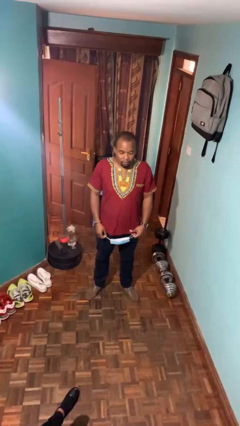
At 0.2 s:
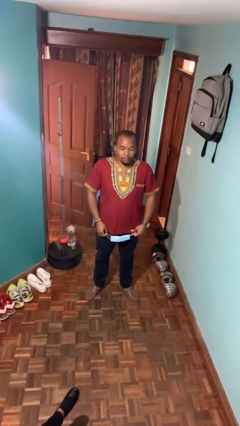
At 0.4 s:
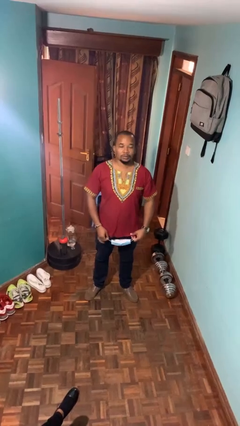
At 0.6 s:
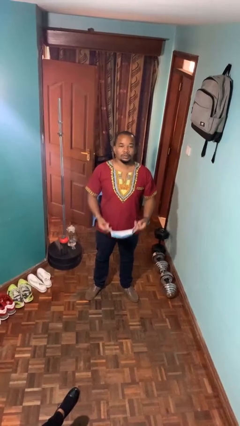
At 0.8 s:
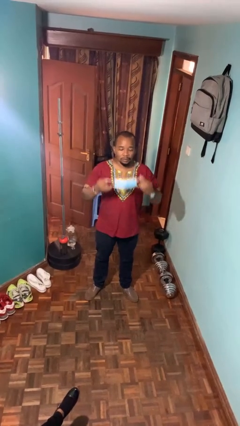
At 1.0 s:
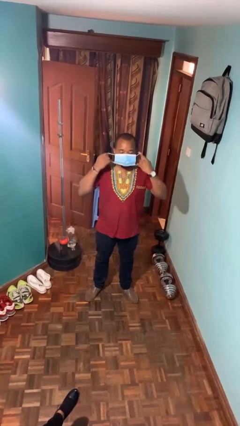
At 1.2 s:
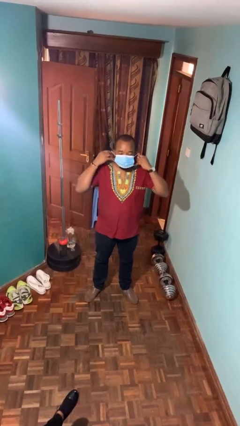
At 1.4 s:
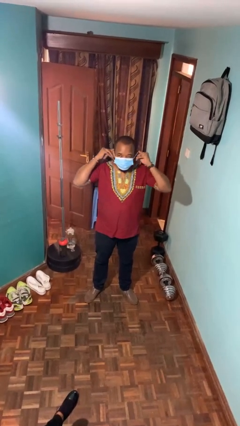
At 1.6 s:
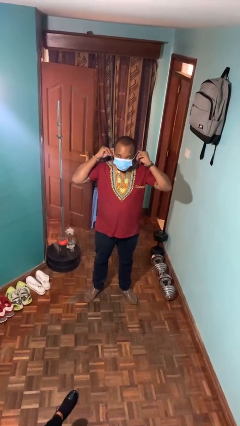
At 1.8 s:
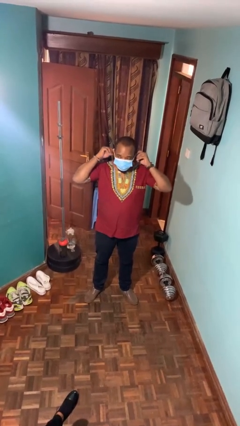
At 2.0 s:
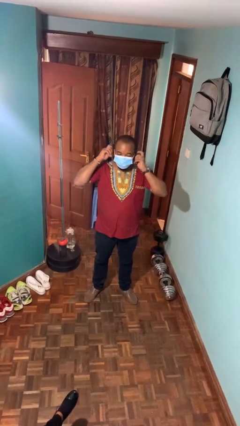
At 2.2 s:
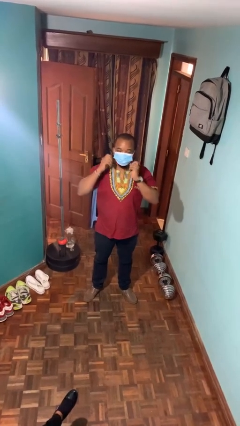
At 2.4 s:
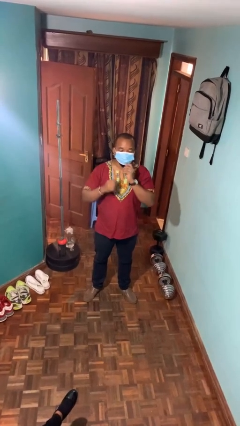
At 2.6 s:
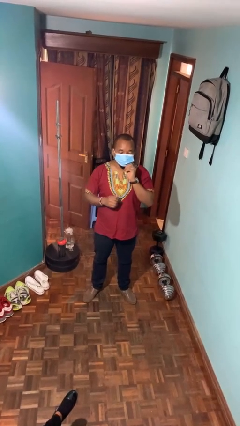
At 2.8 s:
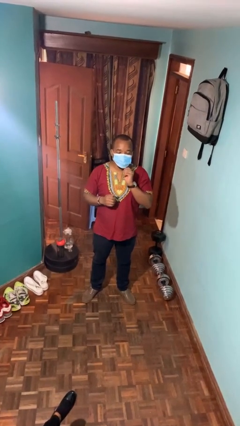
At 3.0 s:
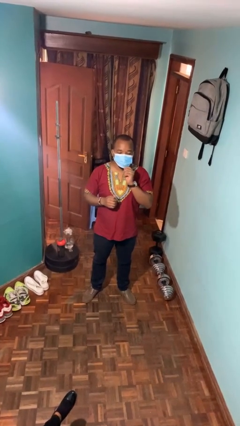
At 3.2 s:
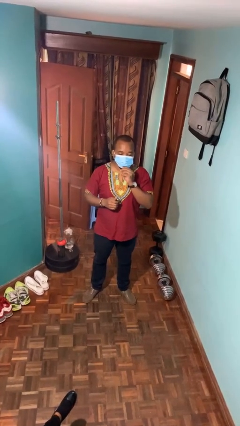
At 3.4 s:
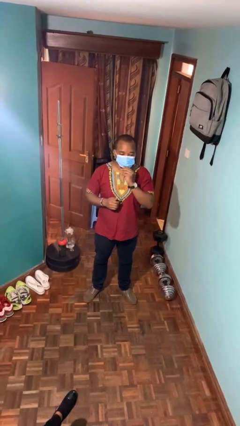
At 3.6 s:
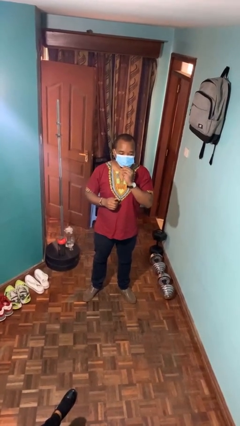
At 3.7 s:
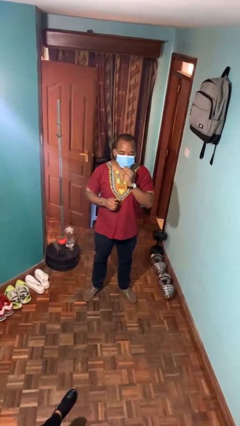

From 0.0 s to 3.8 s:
person puts on facemask

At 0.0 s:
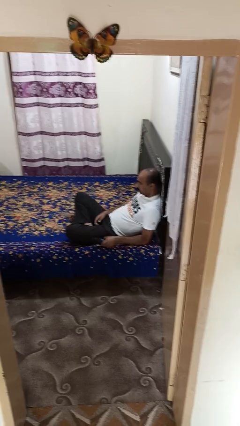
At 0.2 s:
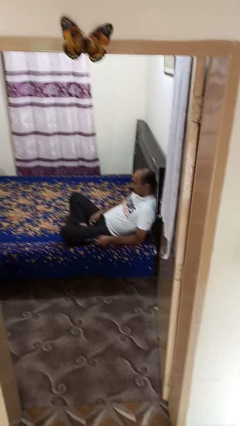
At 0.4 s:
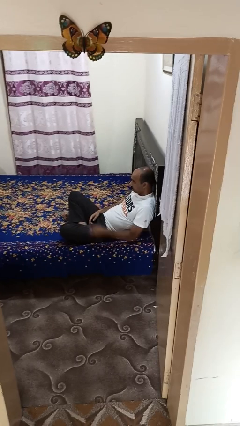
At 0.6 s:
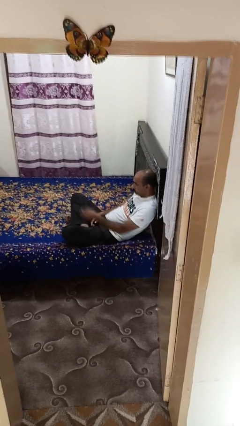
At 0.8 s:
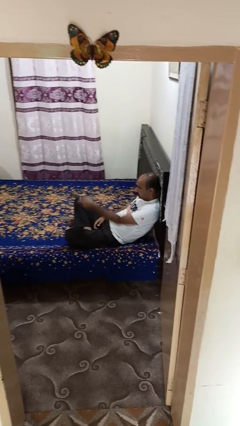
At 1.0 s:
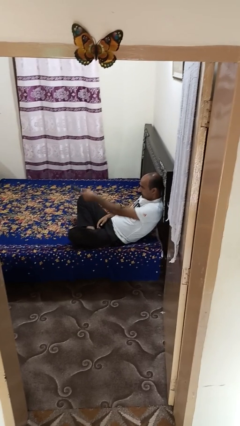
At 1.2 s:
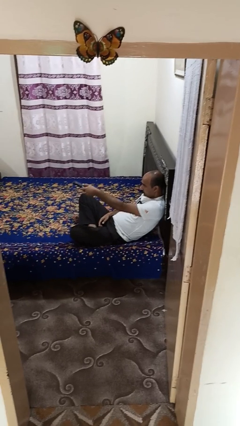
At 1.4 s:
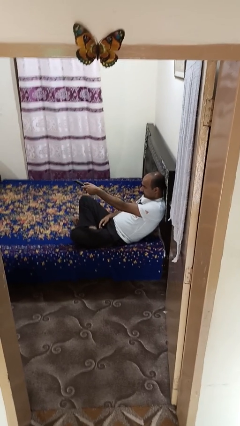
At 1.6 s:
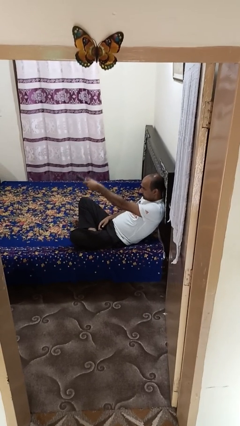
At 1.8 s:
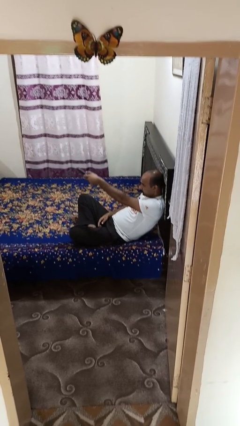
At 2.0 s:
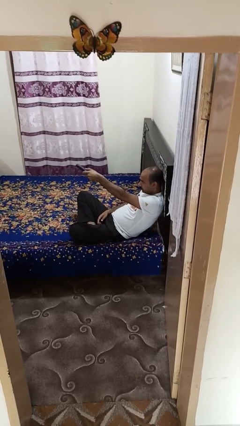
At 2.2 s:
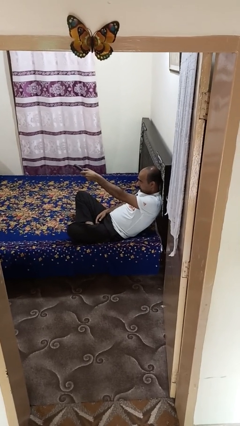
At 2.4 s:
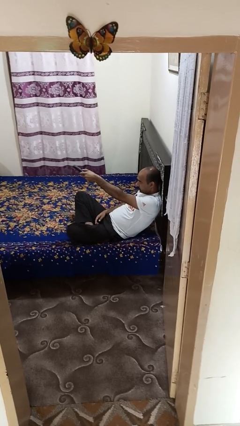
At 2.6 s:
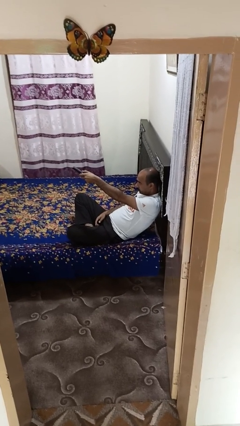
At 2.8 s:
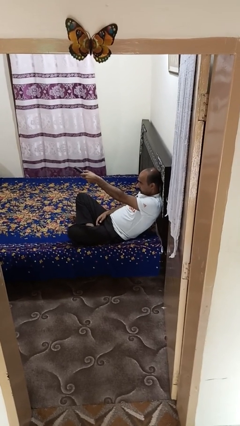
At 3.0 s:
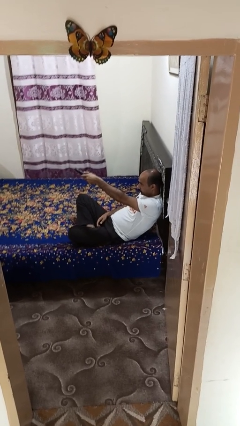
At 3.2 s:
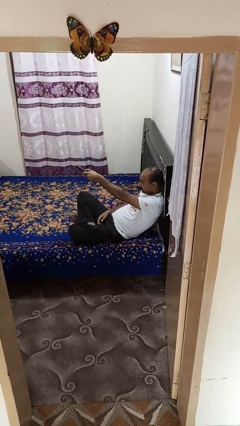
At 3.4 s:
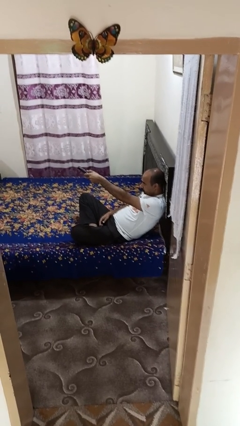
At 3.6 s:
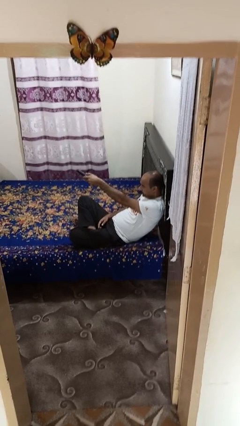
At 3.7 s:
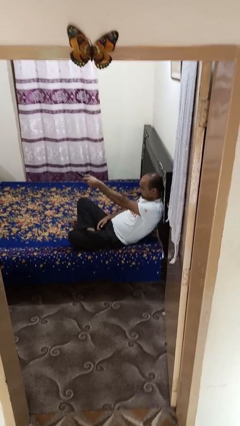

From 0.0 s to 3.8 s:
person uses television remote

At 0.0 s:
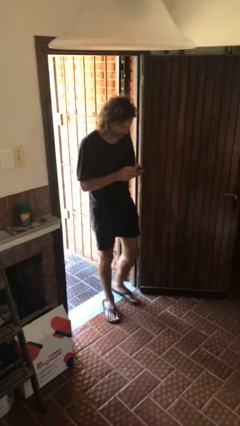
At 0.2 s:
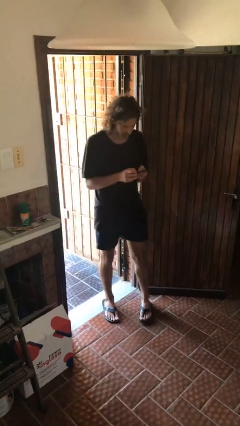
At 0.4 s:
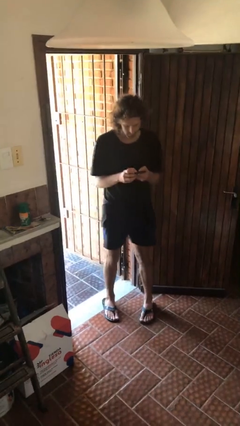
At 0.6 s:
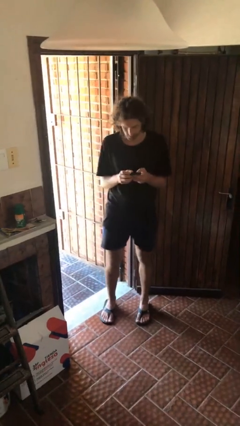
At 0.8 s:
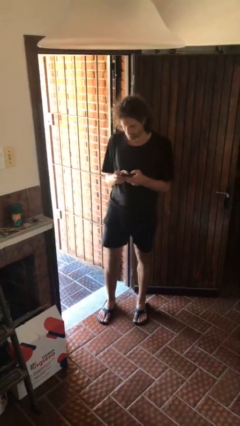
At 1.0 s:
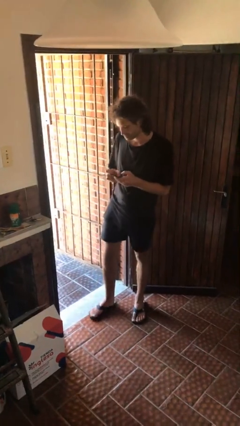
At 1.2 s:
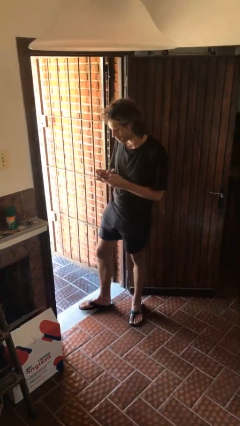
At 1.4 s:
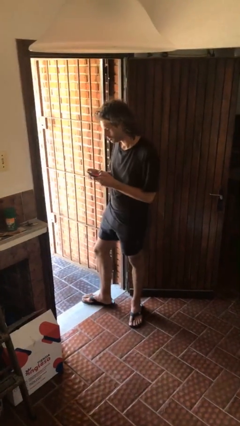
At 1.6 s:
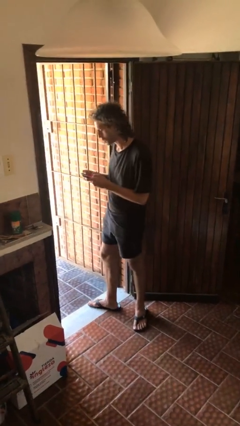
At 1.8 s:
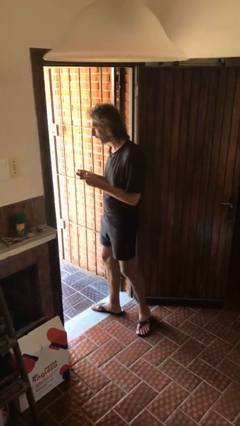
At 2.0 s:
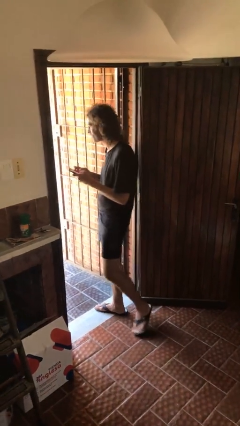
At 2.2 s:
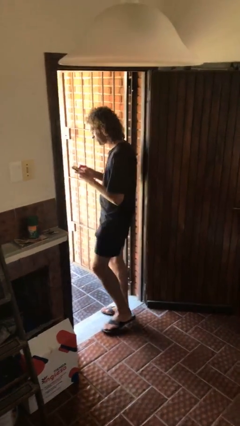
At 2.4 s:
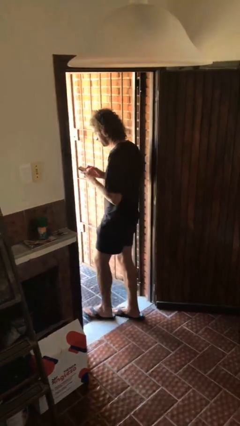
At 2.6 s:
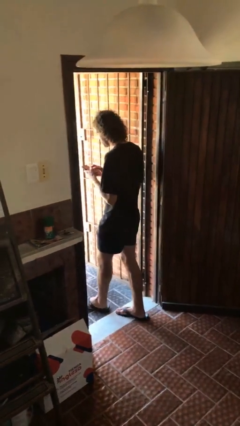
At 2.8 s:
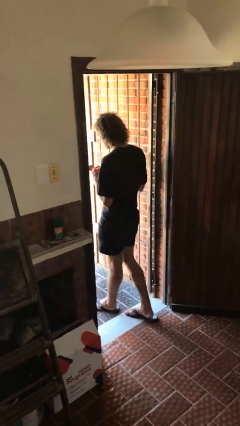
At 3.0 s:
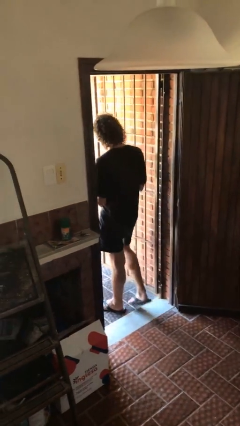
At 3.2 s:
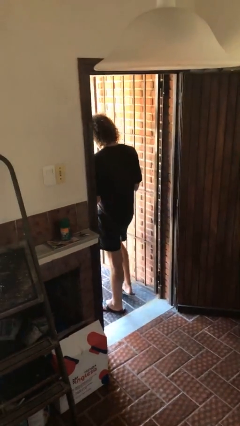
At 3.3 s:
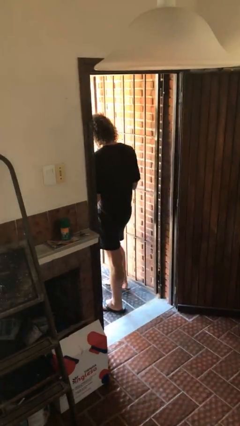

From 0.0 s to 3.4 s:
person exits scene through structure

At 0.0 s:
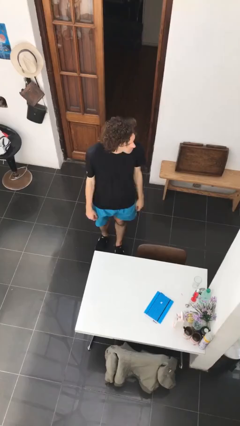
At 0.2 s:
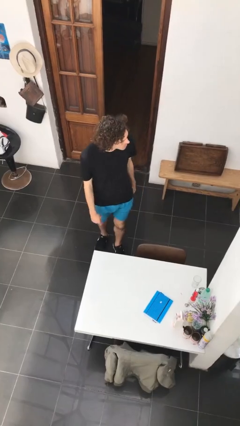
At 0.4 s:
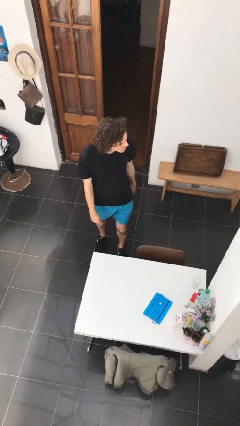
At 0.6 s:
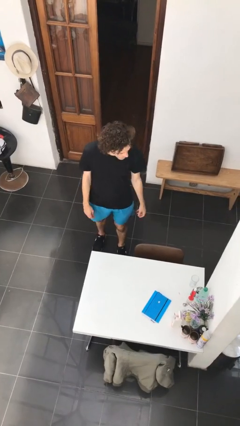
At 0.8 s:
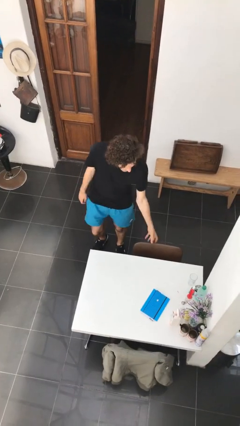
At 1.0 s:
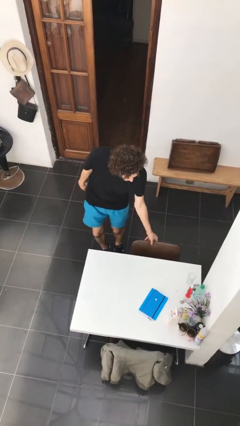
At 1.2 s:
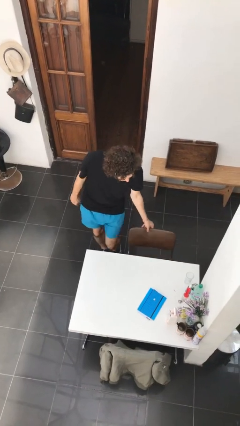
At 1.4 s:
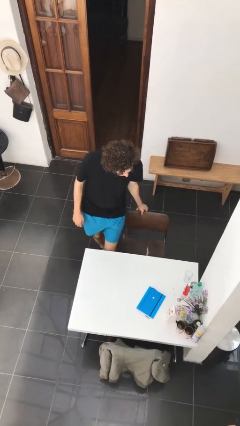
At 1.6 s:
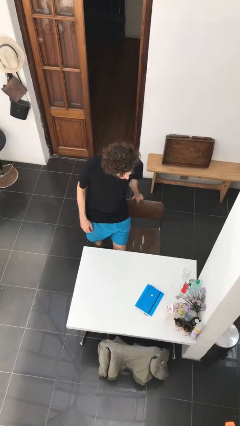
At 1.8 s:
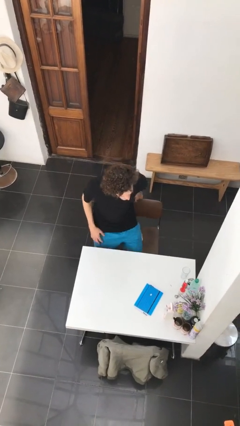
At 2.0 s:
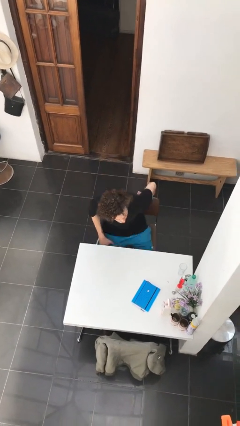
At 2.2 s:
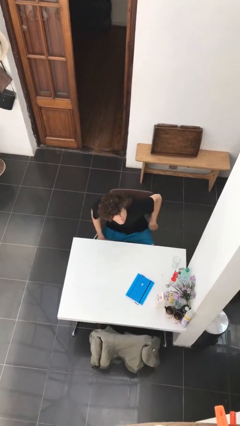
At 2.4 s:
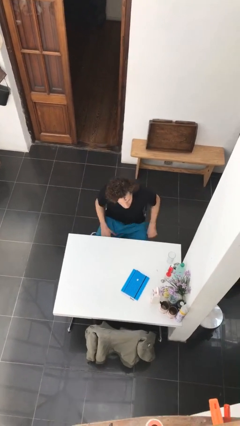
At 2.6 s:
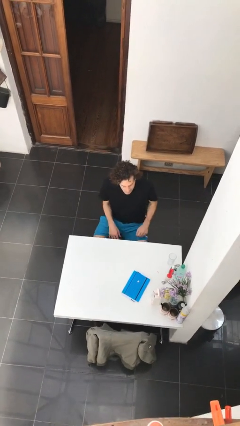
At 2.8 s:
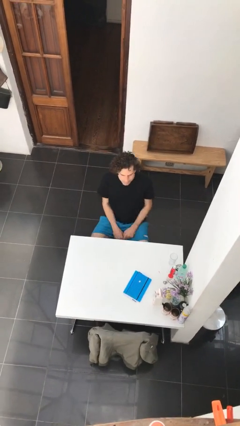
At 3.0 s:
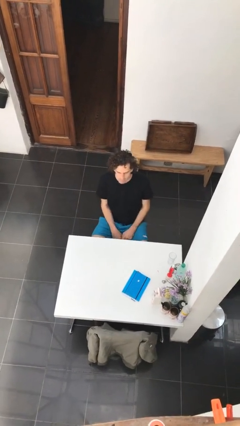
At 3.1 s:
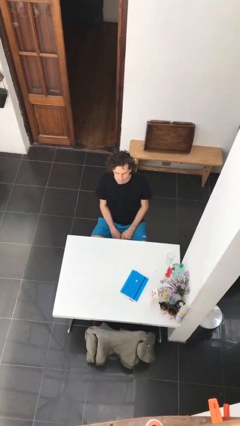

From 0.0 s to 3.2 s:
person sits down

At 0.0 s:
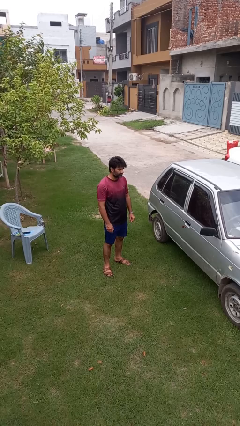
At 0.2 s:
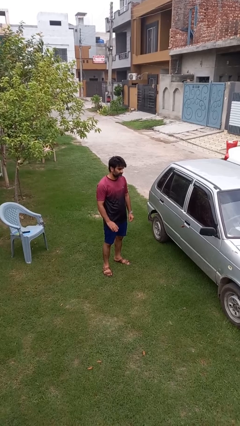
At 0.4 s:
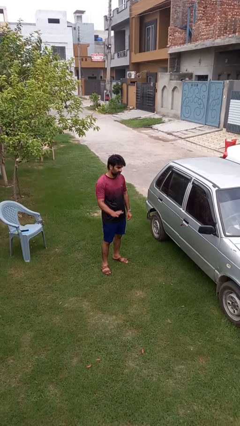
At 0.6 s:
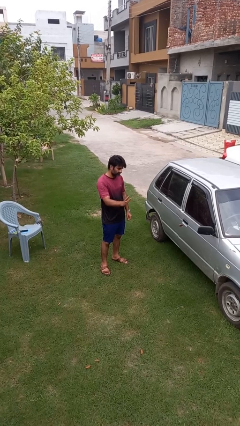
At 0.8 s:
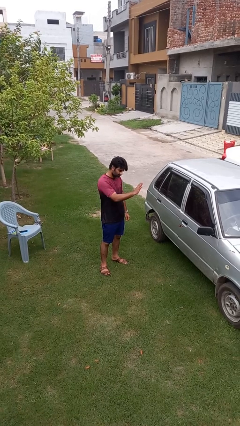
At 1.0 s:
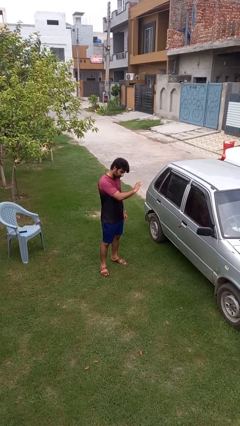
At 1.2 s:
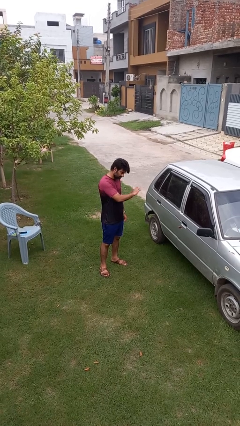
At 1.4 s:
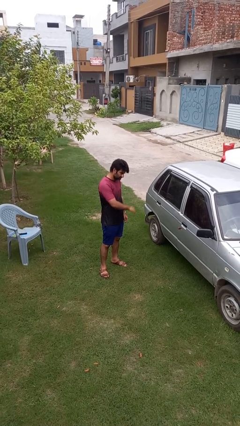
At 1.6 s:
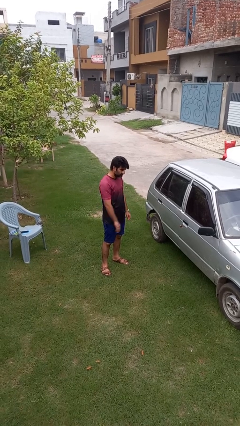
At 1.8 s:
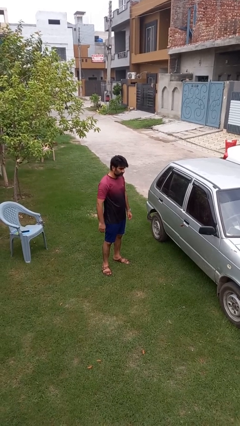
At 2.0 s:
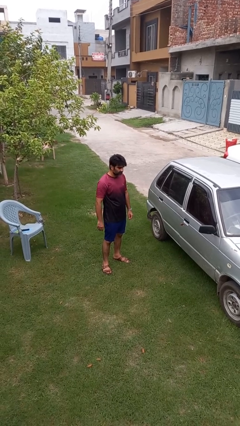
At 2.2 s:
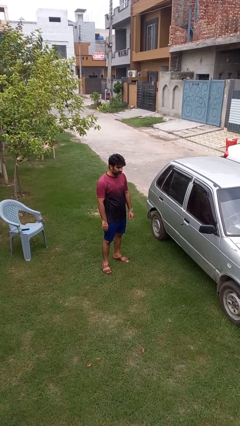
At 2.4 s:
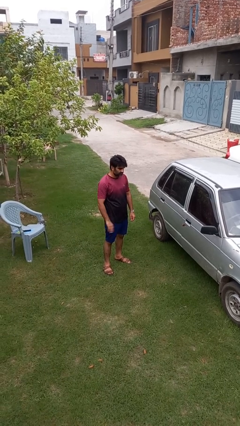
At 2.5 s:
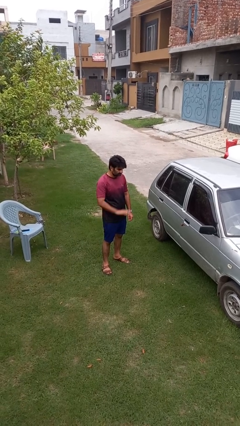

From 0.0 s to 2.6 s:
person gestures swipe left

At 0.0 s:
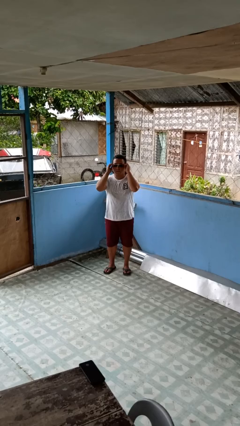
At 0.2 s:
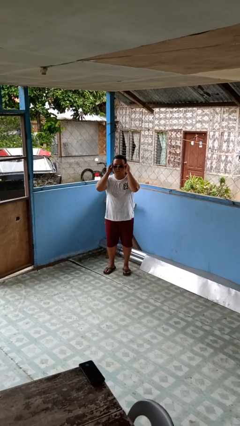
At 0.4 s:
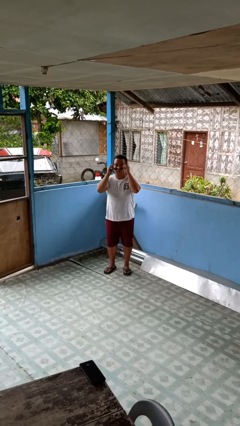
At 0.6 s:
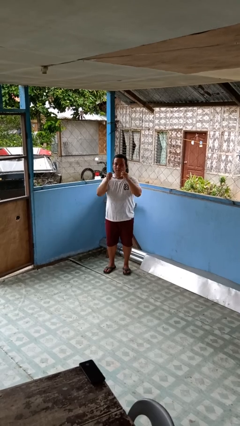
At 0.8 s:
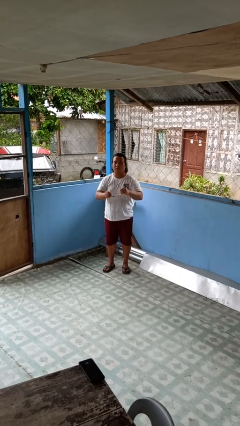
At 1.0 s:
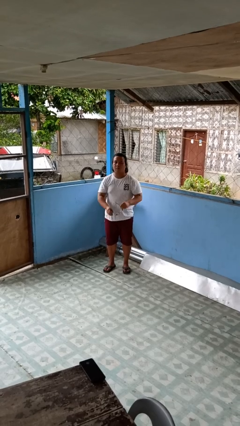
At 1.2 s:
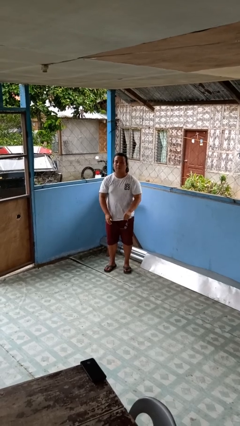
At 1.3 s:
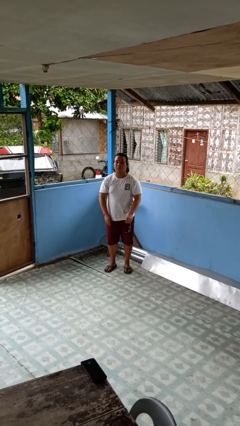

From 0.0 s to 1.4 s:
person takes off sunglasses
